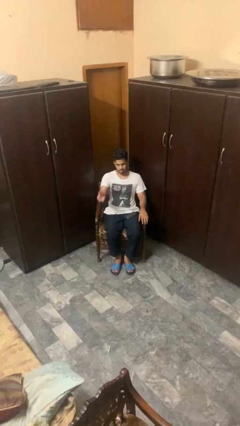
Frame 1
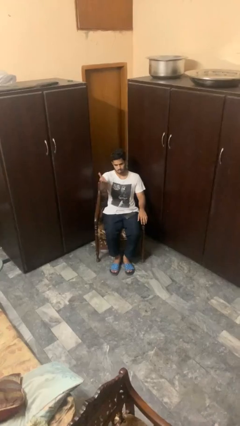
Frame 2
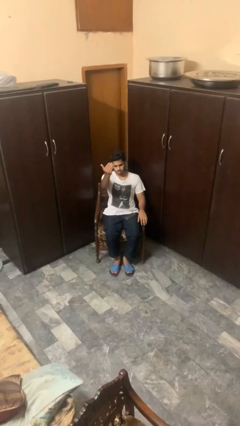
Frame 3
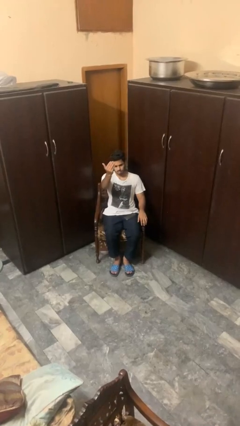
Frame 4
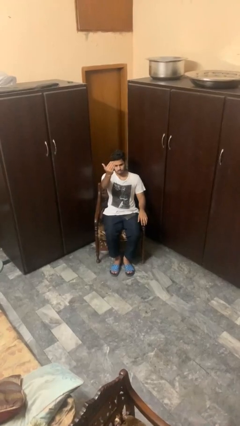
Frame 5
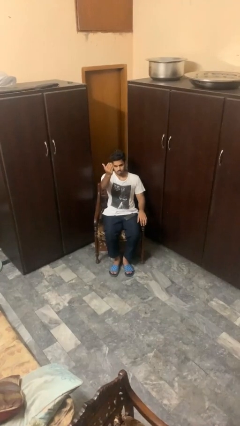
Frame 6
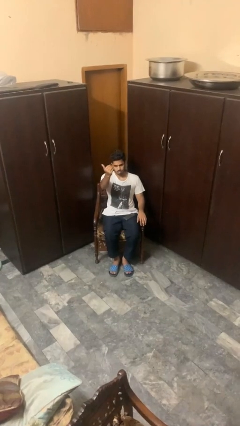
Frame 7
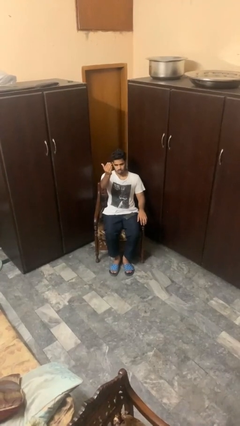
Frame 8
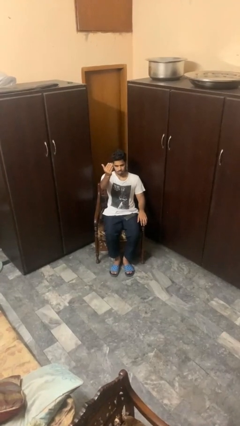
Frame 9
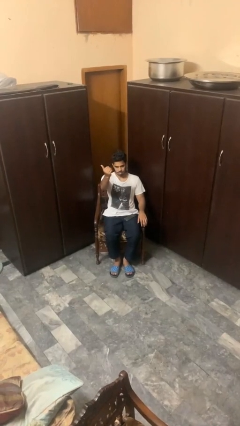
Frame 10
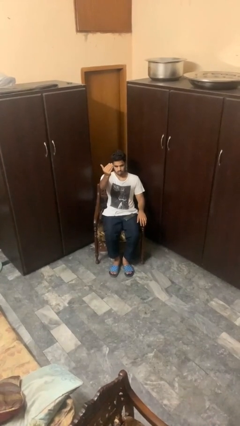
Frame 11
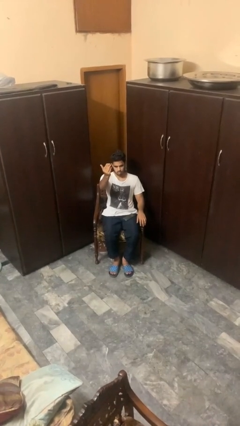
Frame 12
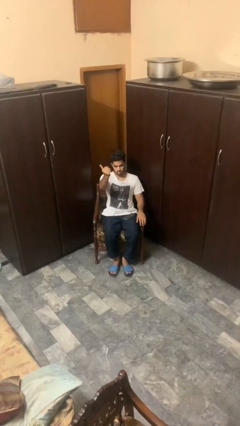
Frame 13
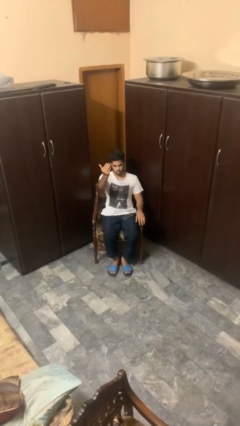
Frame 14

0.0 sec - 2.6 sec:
person gestures come here

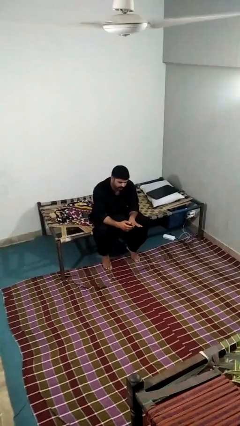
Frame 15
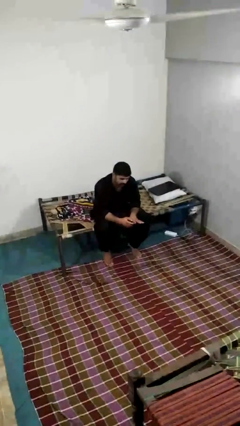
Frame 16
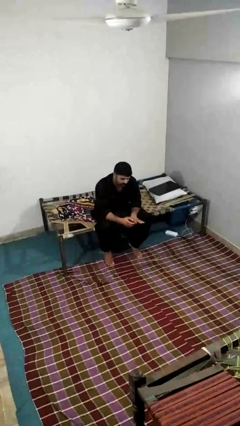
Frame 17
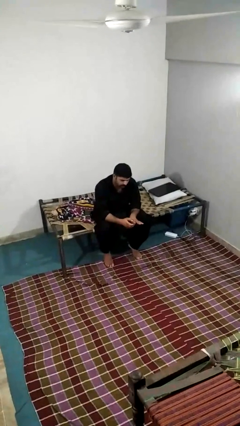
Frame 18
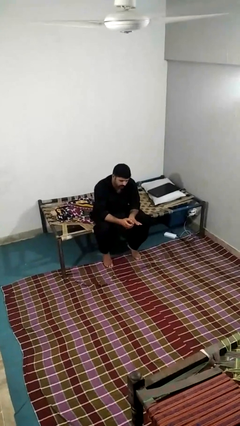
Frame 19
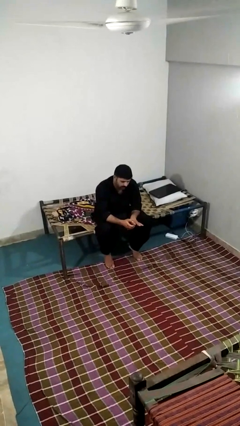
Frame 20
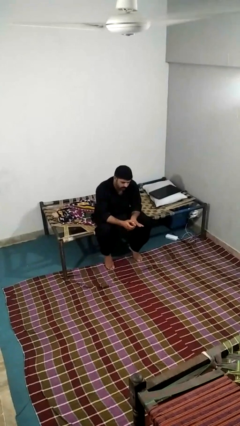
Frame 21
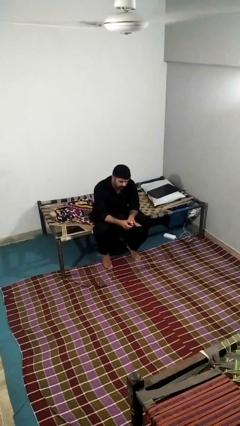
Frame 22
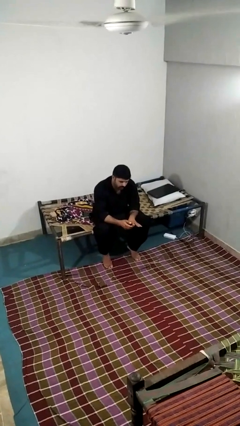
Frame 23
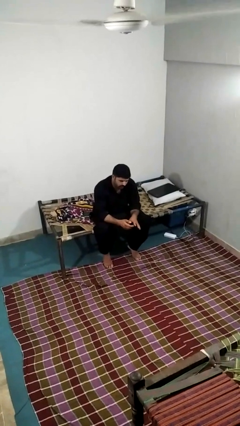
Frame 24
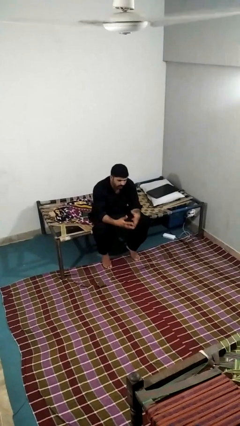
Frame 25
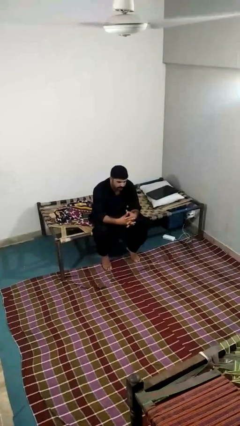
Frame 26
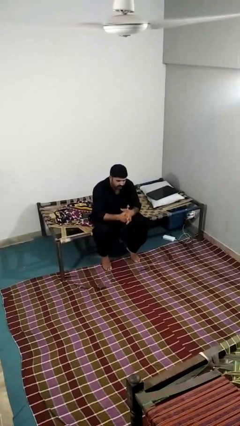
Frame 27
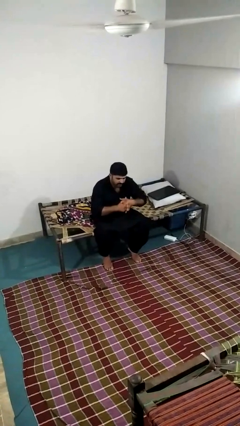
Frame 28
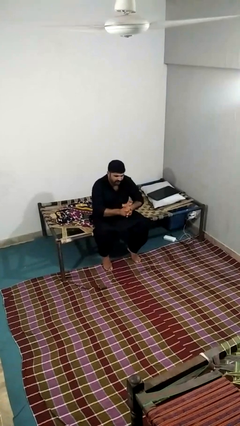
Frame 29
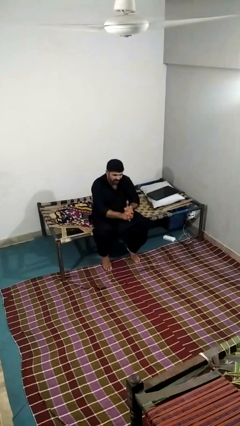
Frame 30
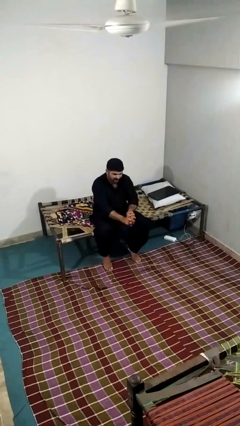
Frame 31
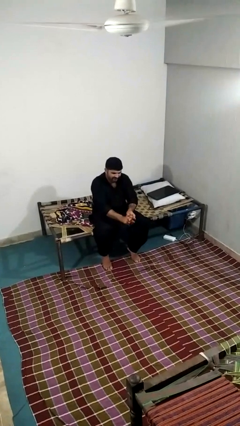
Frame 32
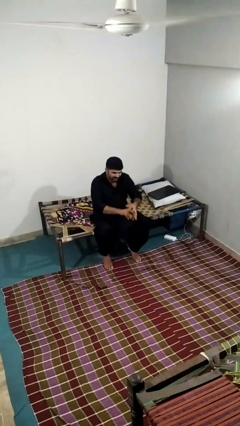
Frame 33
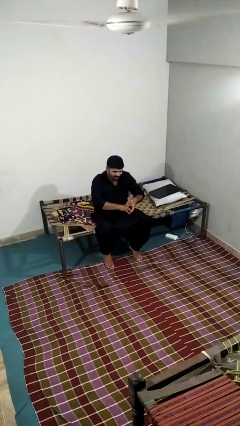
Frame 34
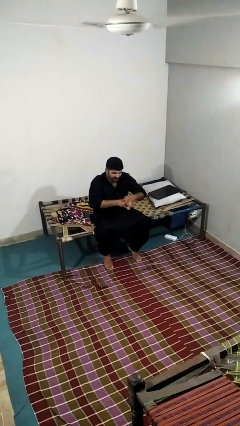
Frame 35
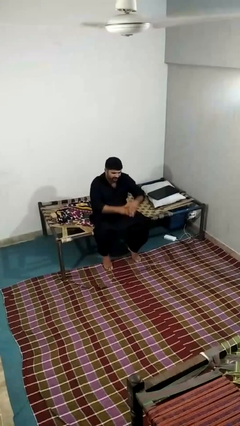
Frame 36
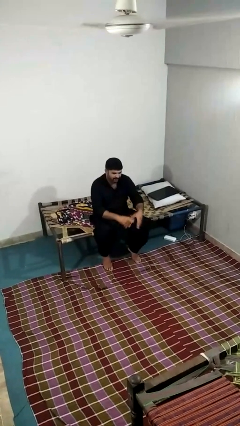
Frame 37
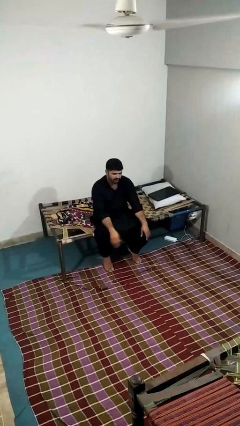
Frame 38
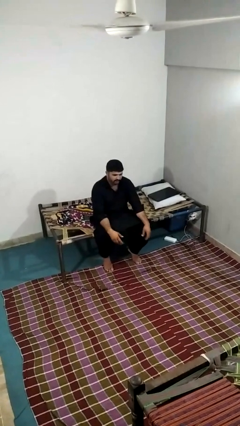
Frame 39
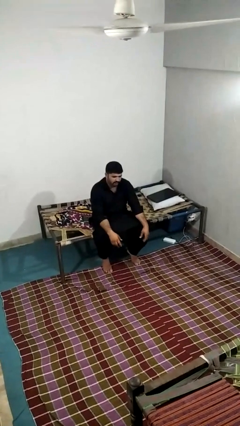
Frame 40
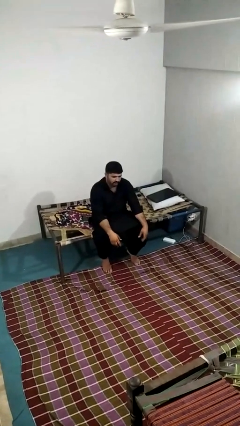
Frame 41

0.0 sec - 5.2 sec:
person cracks knuckles

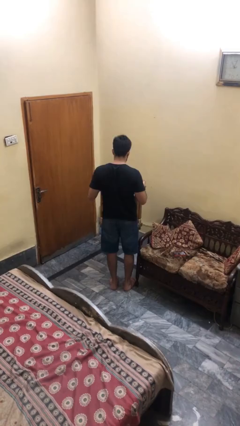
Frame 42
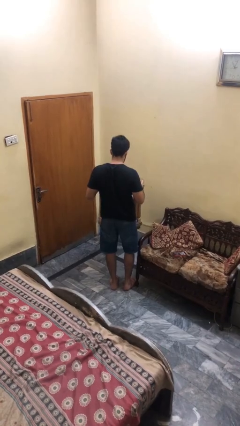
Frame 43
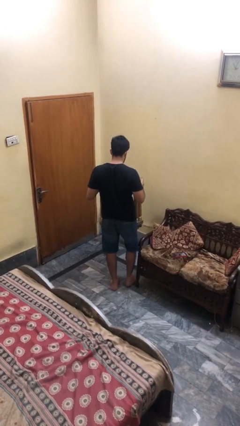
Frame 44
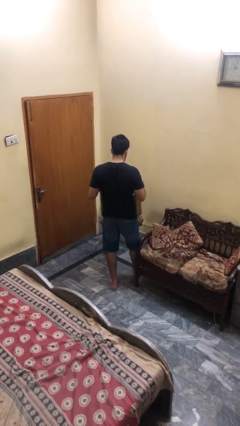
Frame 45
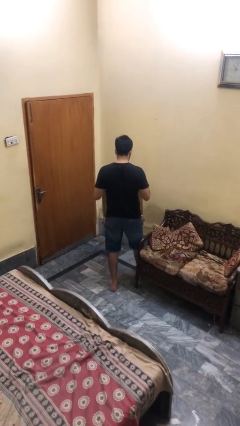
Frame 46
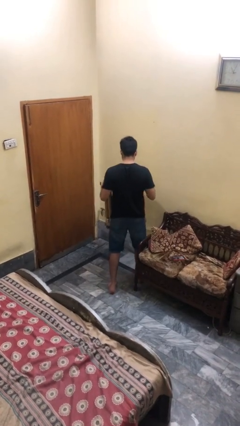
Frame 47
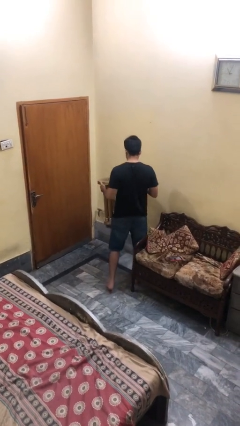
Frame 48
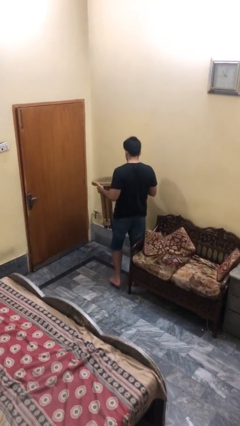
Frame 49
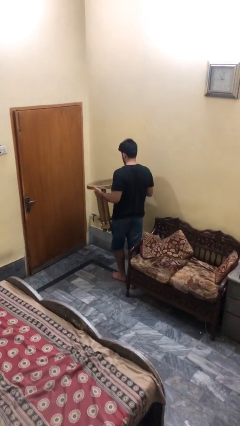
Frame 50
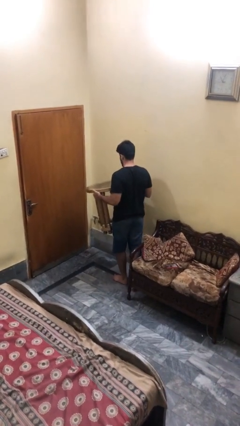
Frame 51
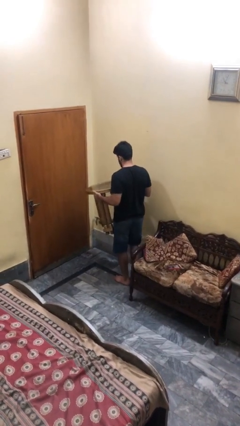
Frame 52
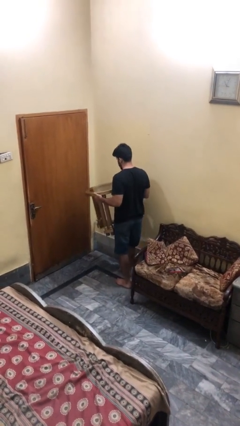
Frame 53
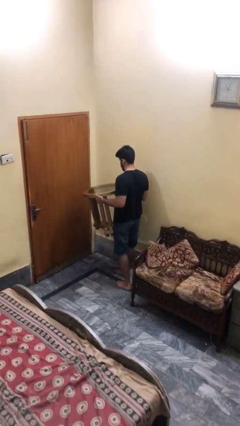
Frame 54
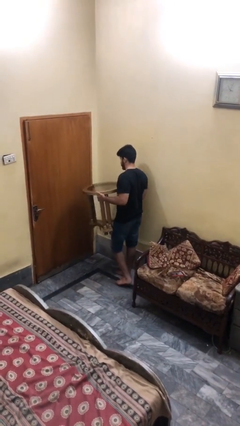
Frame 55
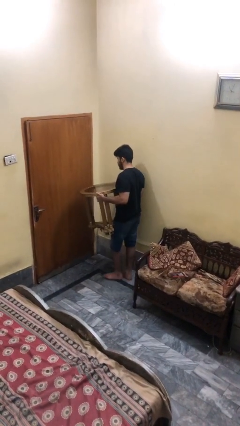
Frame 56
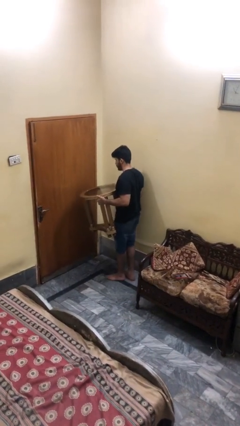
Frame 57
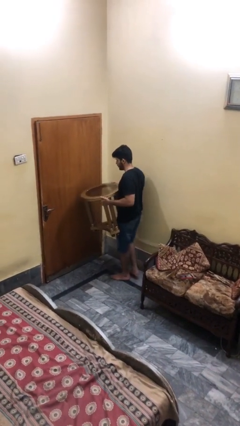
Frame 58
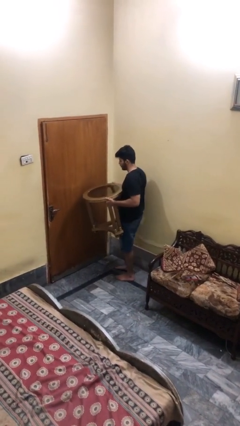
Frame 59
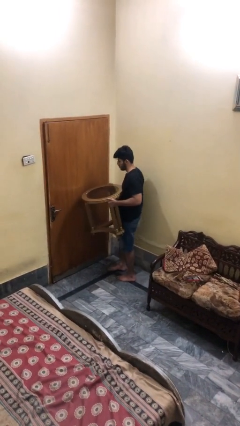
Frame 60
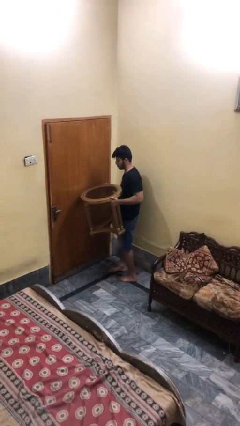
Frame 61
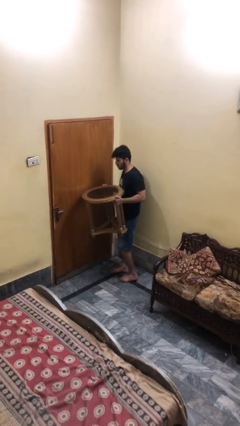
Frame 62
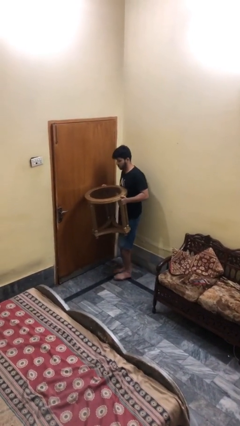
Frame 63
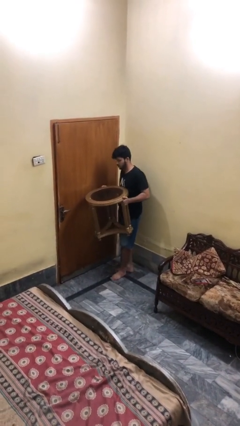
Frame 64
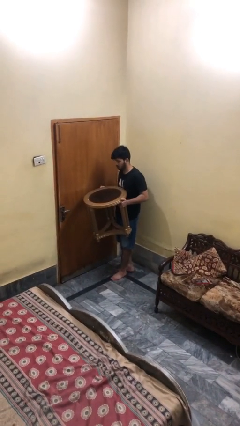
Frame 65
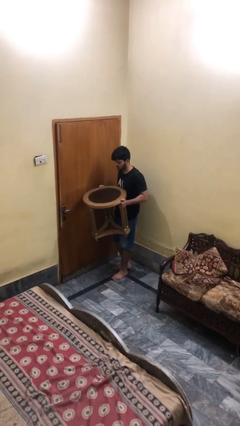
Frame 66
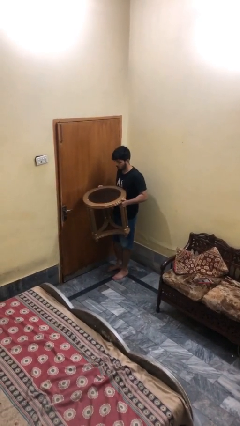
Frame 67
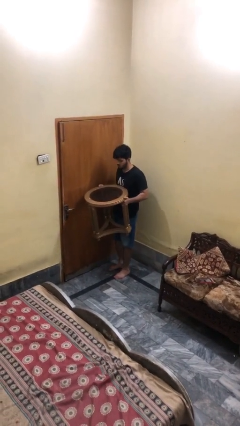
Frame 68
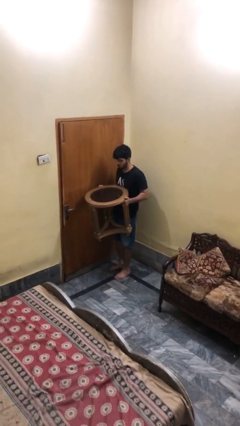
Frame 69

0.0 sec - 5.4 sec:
person carries furniture

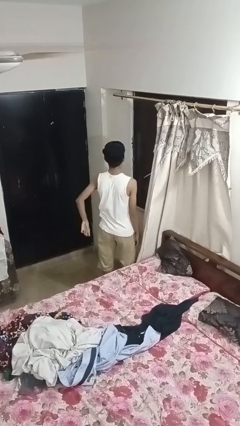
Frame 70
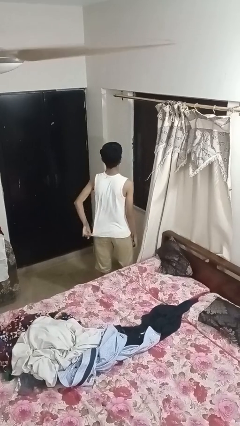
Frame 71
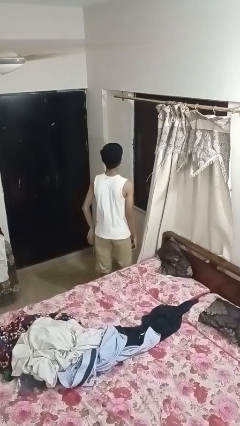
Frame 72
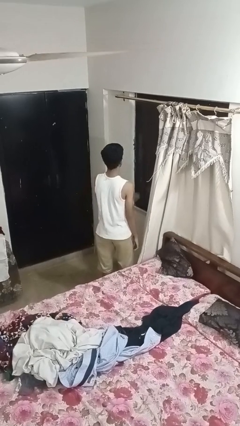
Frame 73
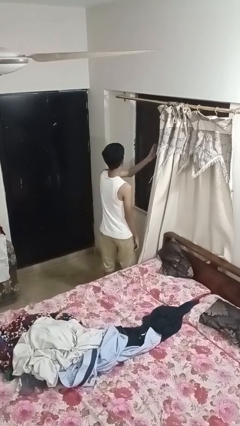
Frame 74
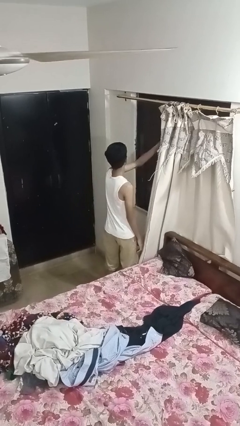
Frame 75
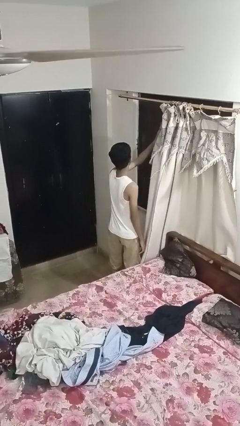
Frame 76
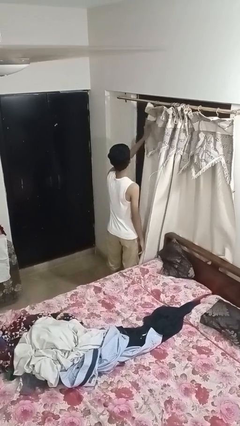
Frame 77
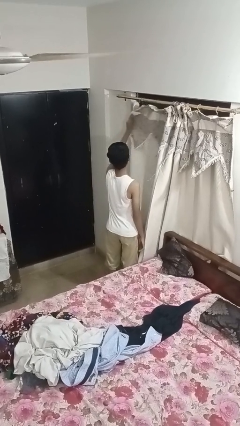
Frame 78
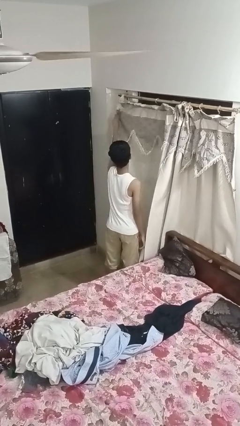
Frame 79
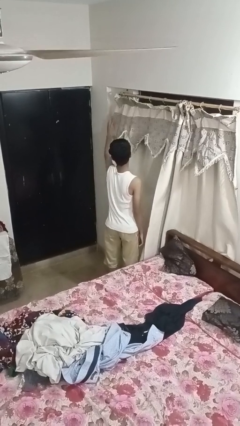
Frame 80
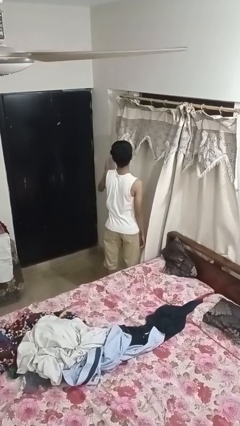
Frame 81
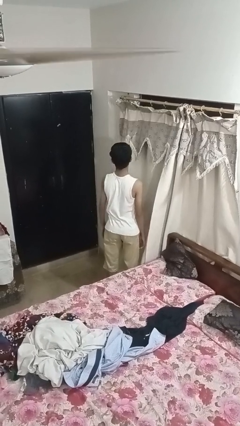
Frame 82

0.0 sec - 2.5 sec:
person closes curtains

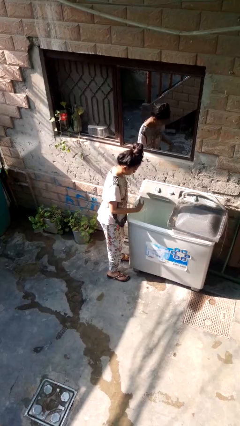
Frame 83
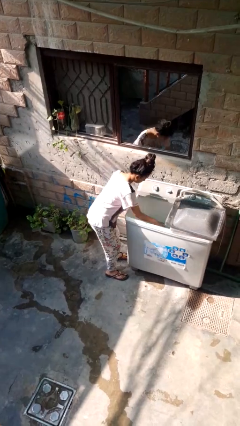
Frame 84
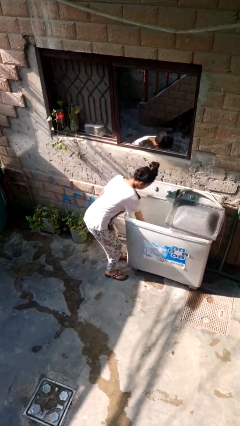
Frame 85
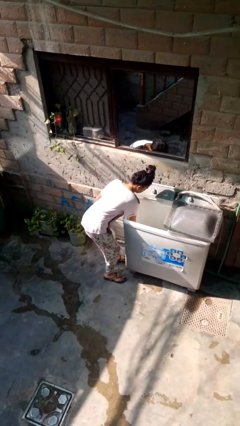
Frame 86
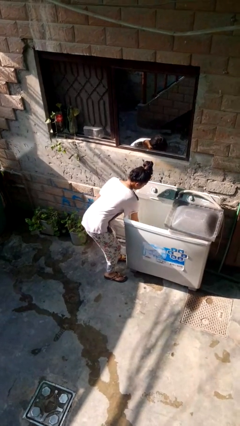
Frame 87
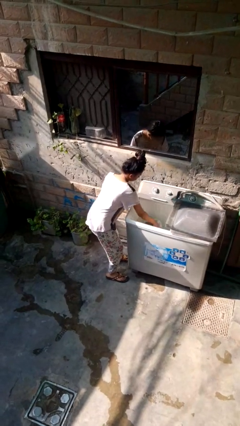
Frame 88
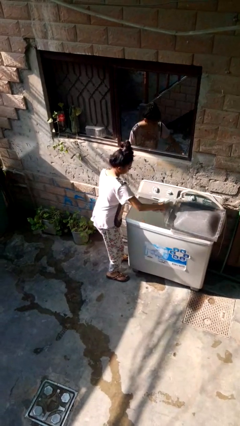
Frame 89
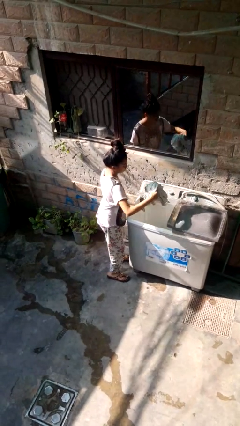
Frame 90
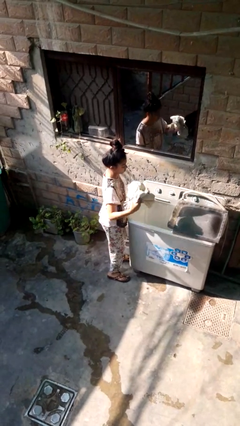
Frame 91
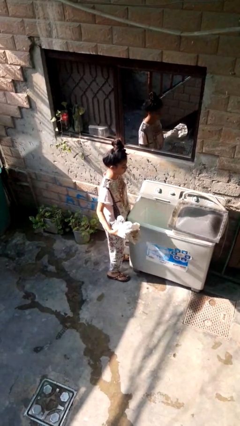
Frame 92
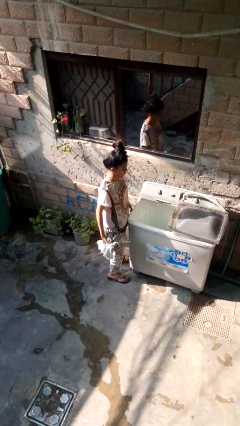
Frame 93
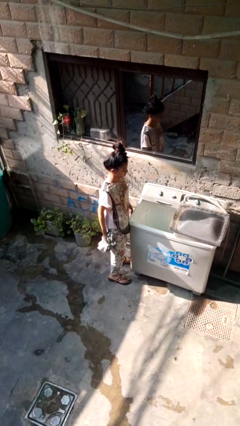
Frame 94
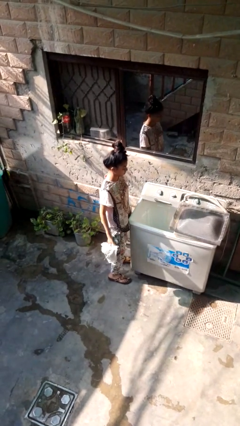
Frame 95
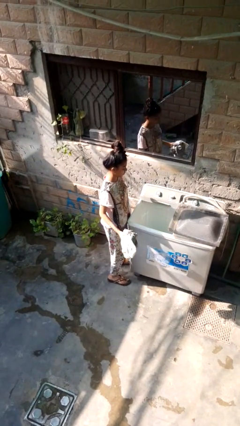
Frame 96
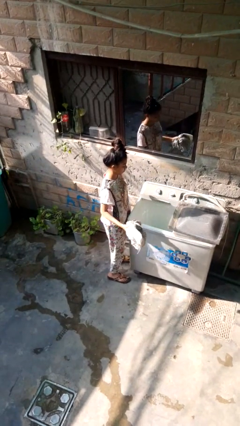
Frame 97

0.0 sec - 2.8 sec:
person unloads clotheswasher
